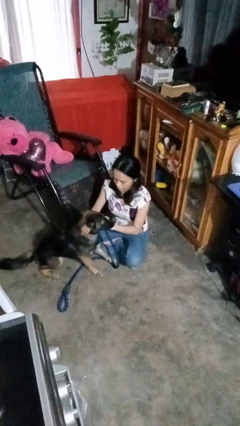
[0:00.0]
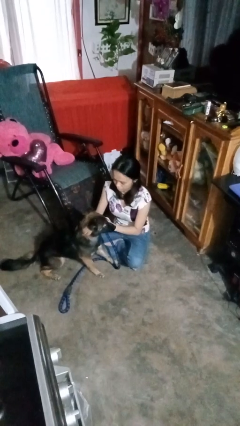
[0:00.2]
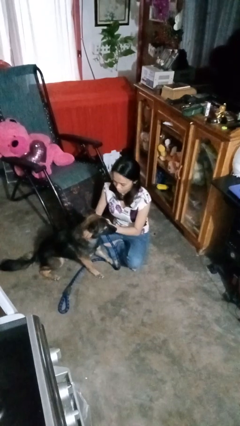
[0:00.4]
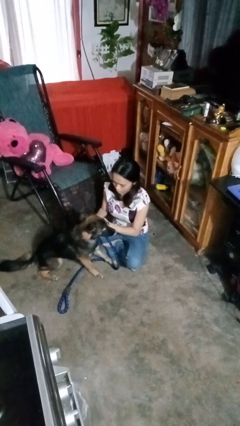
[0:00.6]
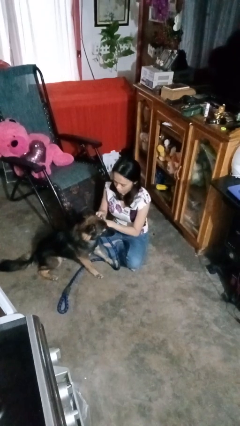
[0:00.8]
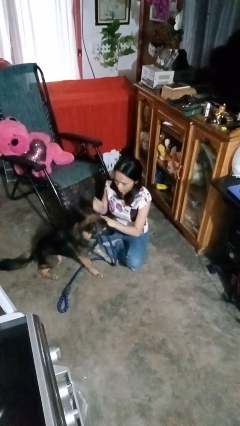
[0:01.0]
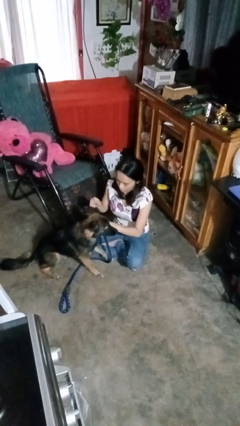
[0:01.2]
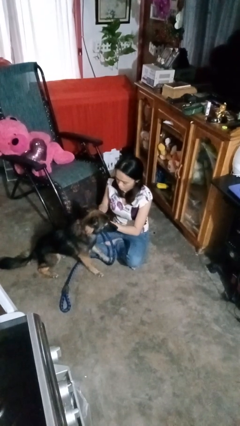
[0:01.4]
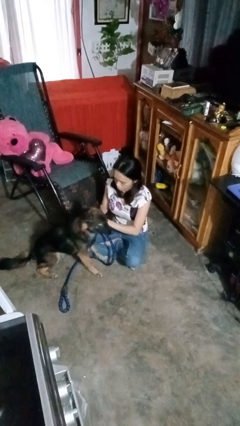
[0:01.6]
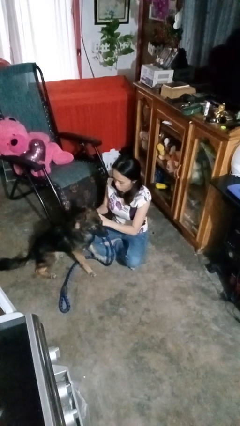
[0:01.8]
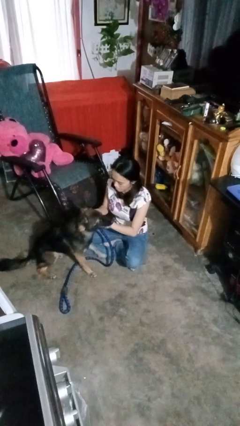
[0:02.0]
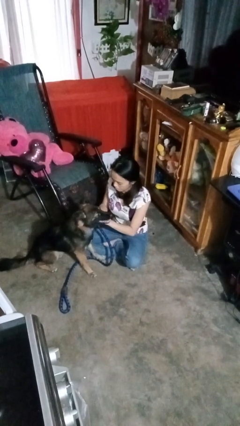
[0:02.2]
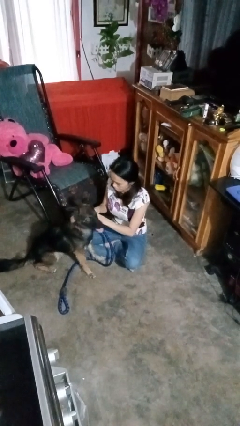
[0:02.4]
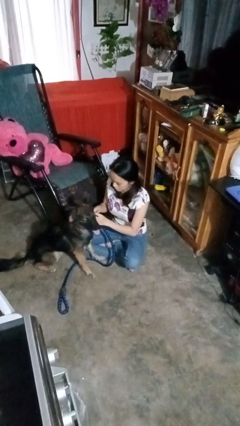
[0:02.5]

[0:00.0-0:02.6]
person attaches leash to dog

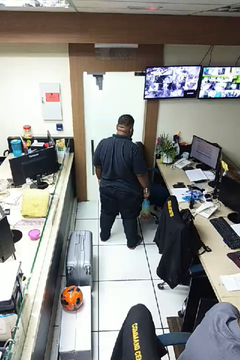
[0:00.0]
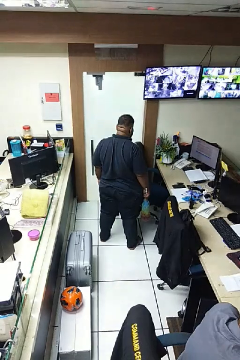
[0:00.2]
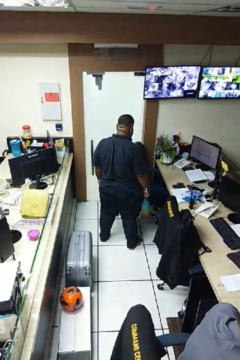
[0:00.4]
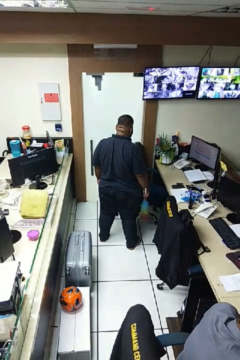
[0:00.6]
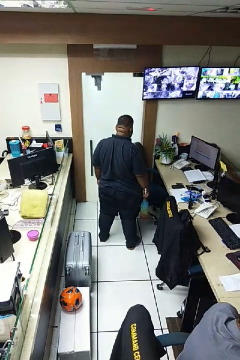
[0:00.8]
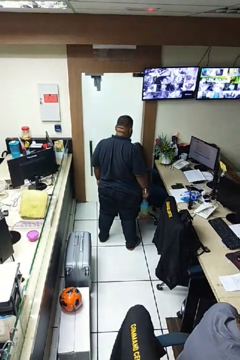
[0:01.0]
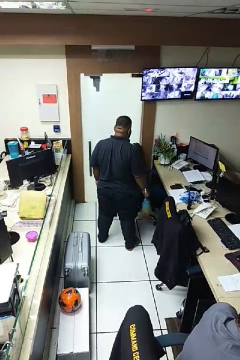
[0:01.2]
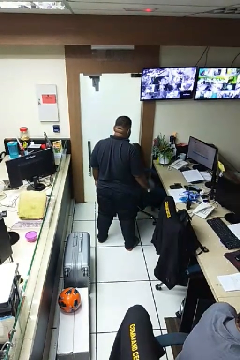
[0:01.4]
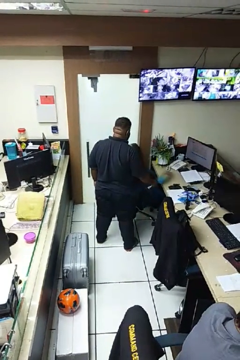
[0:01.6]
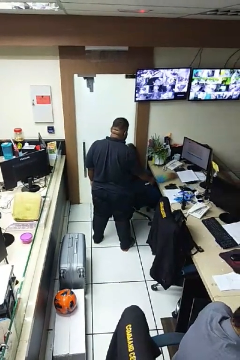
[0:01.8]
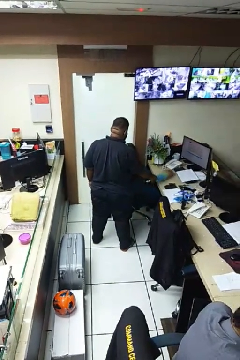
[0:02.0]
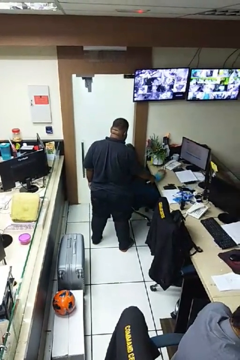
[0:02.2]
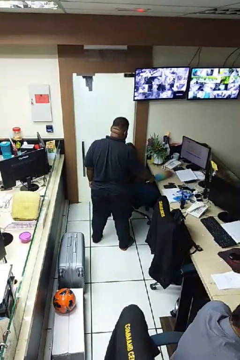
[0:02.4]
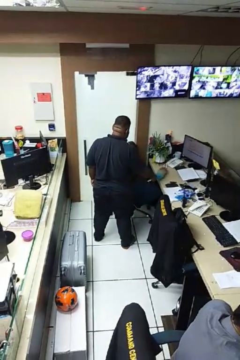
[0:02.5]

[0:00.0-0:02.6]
person dusts furniture

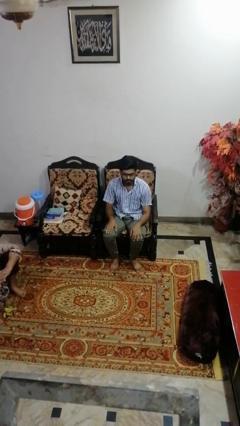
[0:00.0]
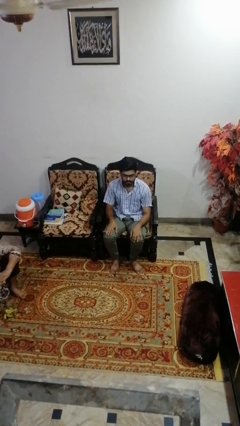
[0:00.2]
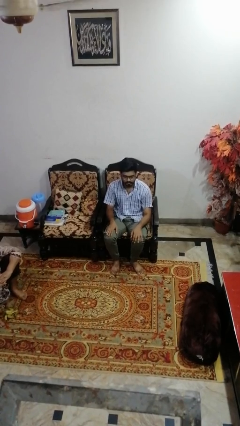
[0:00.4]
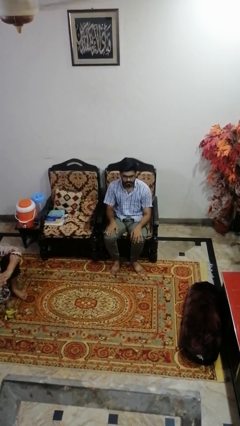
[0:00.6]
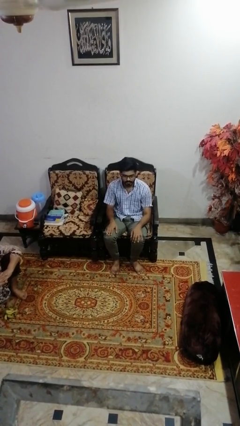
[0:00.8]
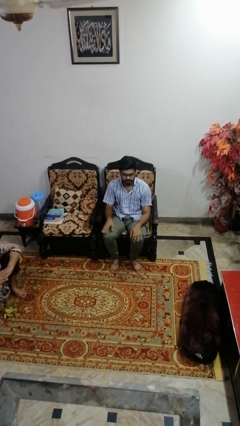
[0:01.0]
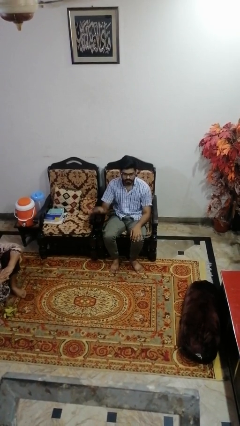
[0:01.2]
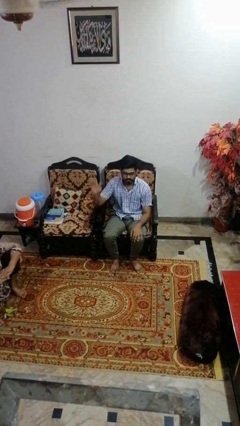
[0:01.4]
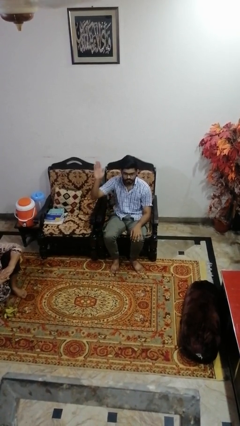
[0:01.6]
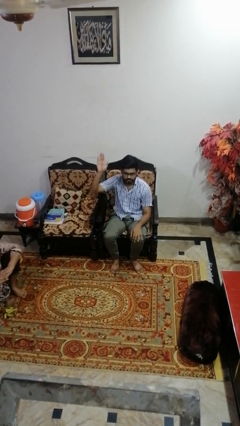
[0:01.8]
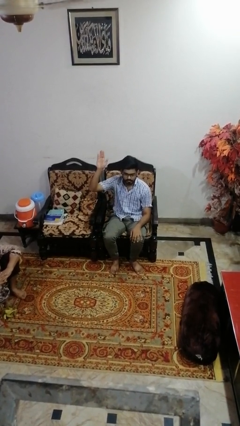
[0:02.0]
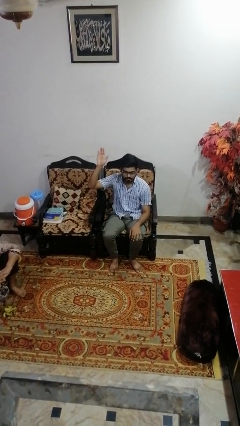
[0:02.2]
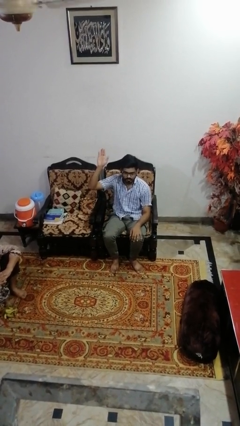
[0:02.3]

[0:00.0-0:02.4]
person gestures raise hand

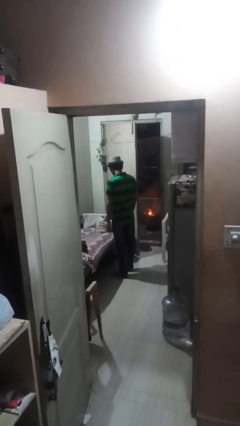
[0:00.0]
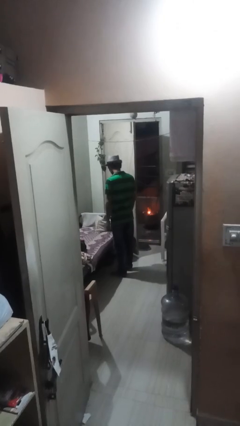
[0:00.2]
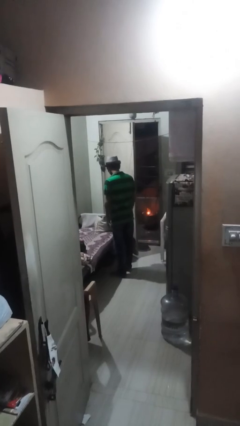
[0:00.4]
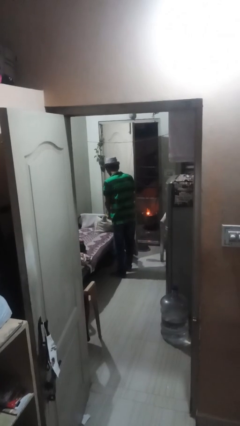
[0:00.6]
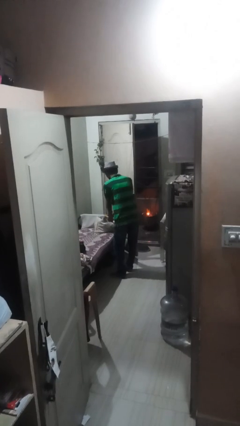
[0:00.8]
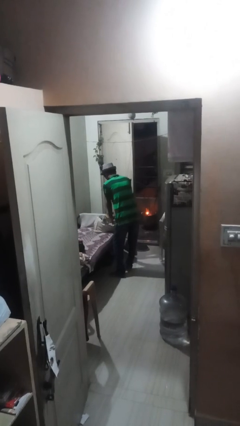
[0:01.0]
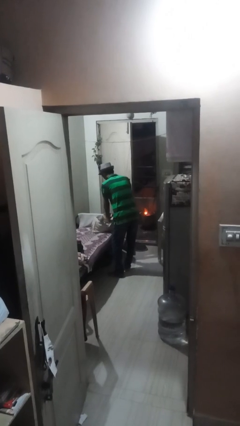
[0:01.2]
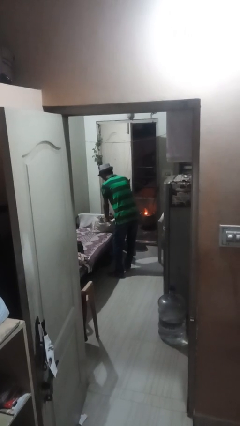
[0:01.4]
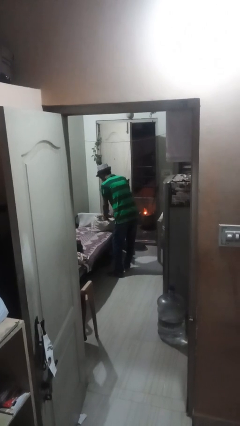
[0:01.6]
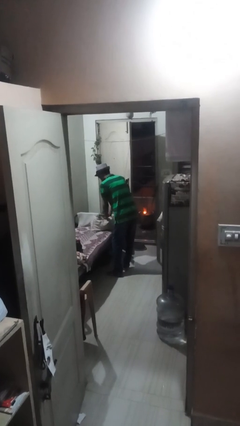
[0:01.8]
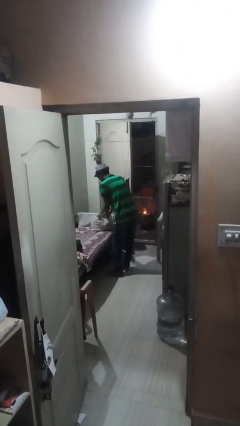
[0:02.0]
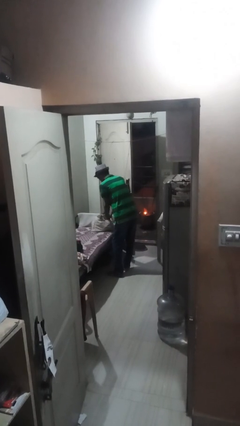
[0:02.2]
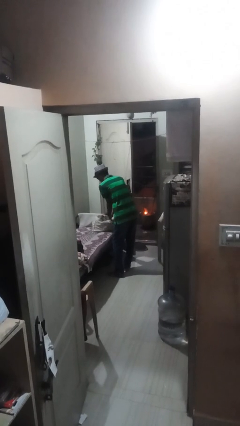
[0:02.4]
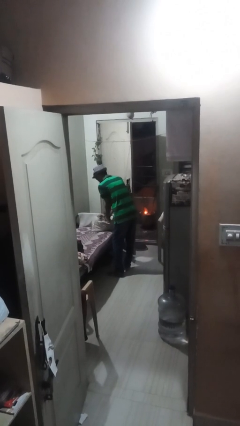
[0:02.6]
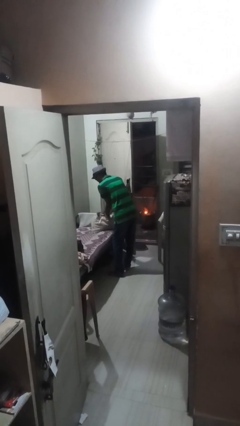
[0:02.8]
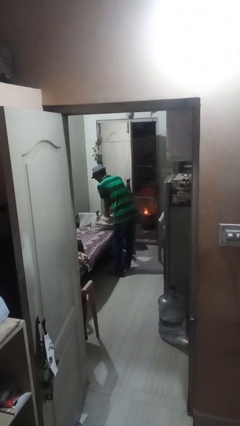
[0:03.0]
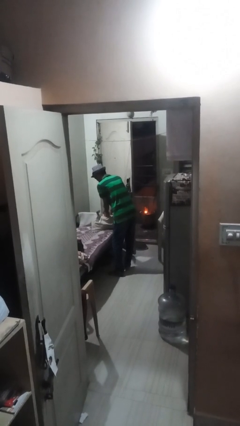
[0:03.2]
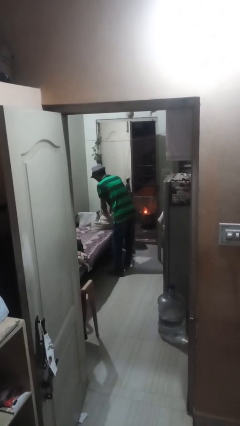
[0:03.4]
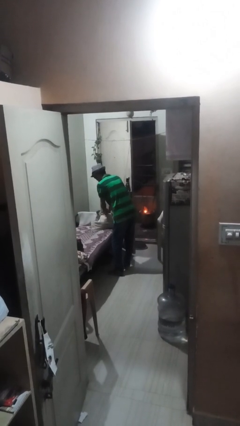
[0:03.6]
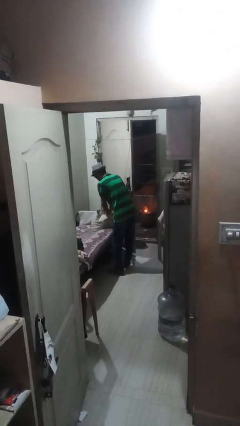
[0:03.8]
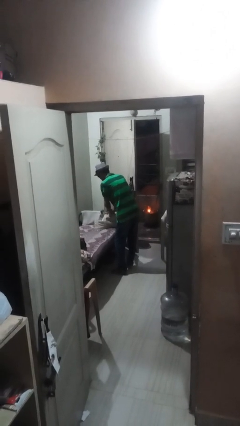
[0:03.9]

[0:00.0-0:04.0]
person searches in bag

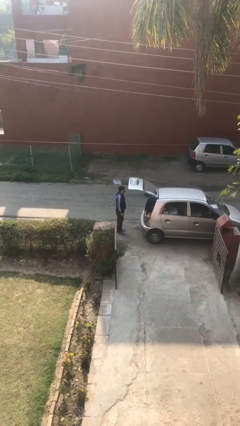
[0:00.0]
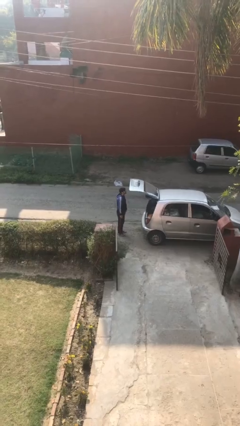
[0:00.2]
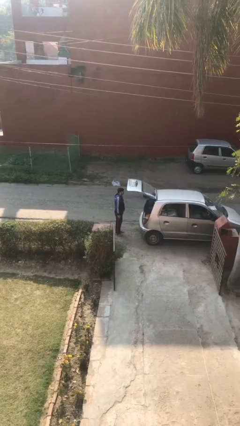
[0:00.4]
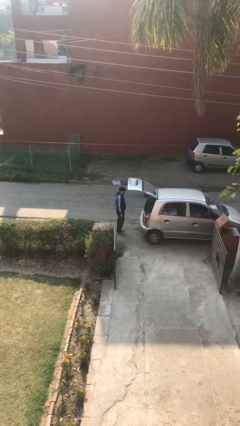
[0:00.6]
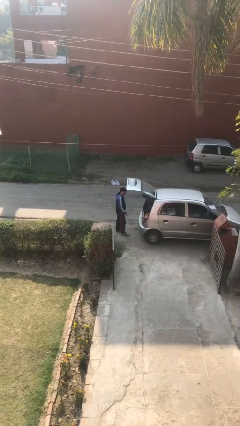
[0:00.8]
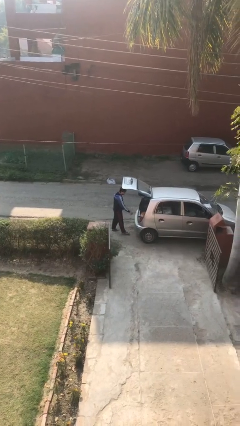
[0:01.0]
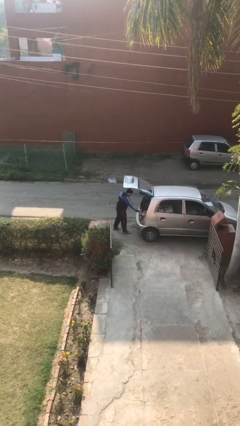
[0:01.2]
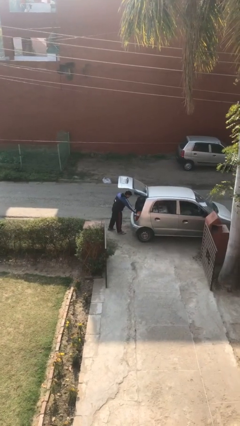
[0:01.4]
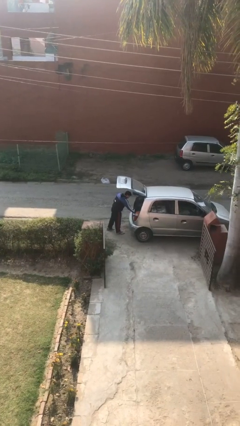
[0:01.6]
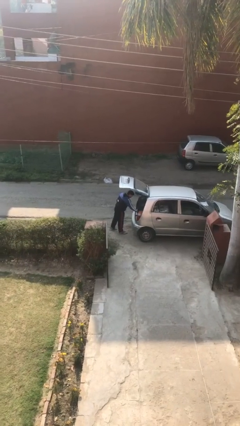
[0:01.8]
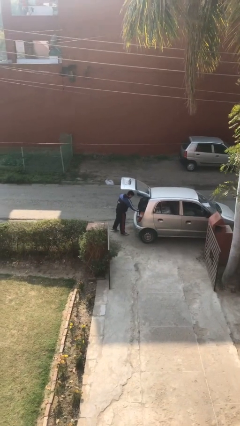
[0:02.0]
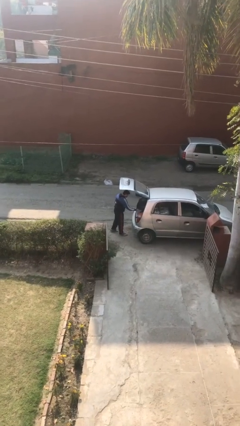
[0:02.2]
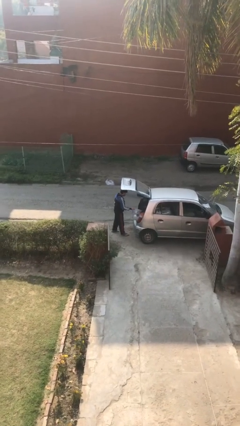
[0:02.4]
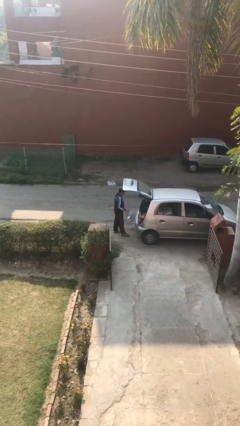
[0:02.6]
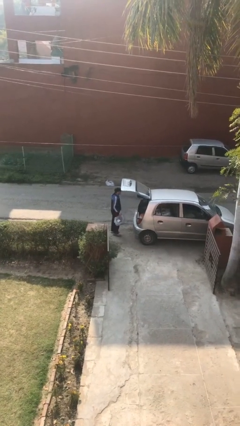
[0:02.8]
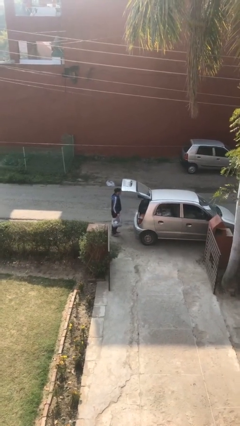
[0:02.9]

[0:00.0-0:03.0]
person unloads car

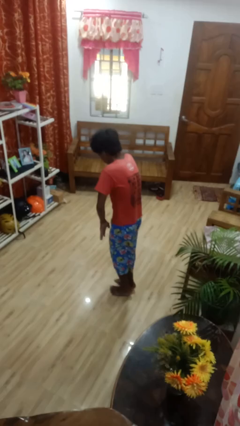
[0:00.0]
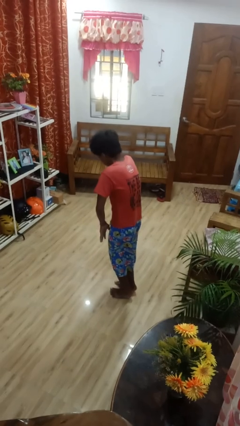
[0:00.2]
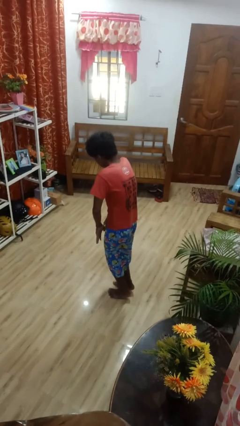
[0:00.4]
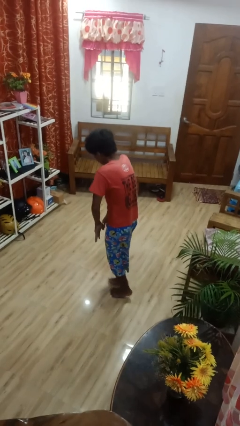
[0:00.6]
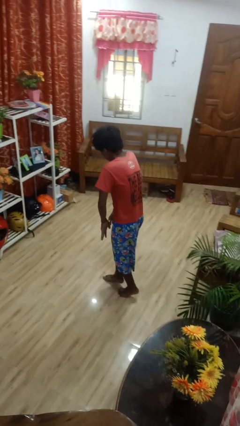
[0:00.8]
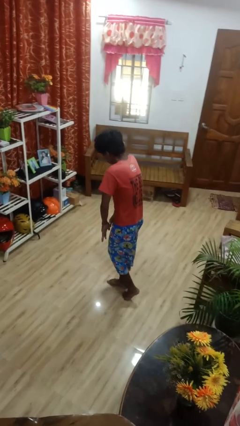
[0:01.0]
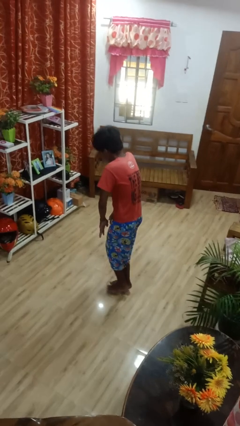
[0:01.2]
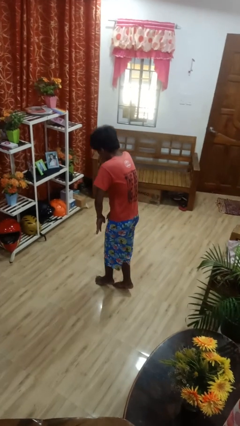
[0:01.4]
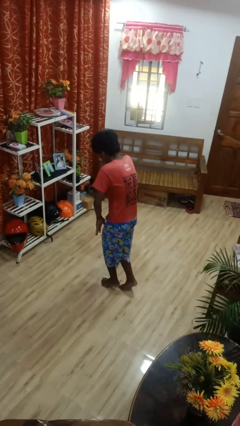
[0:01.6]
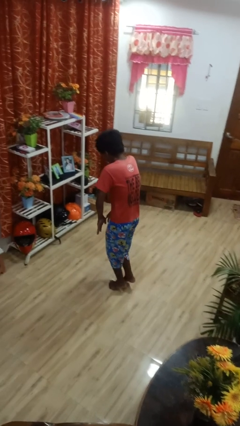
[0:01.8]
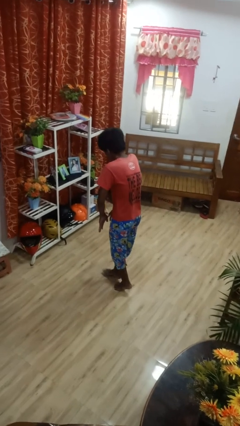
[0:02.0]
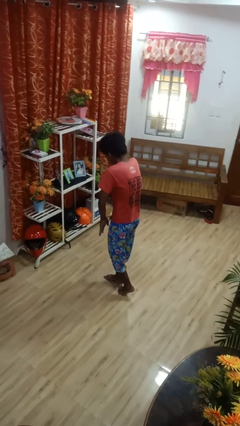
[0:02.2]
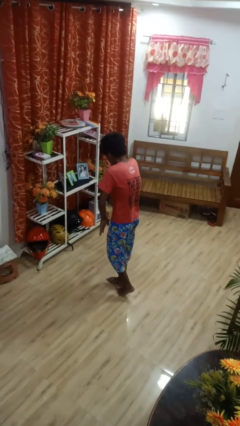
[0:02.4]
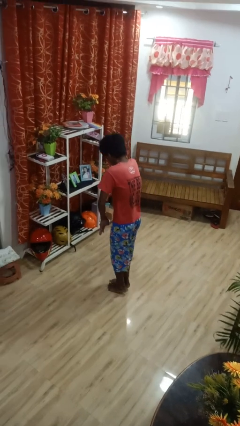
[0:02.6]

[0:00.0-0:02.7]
person walks tiptoe

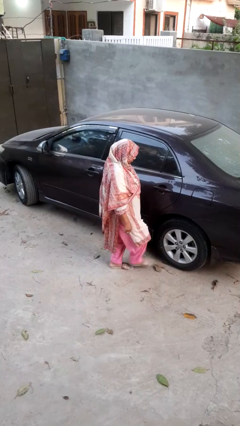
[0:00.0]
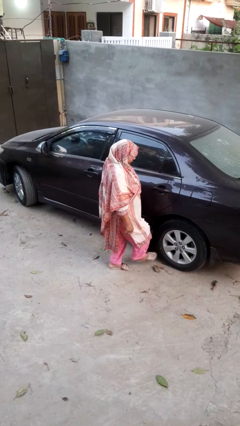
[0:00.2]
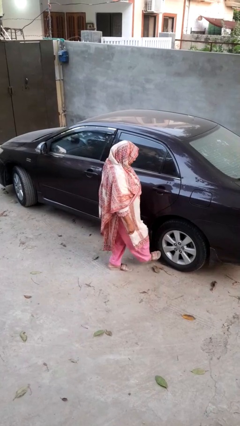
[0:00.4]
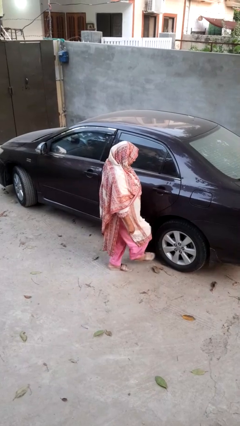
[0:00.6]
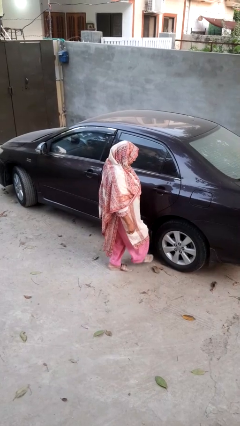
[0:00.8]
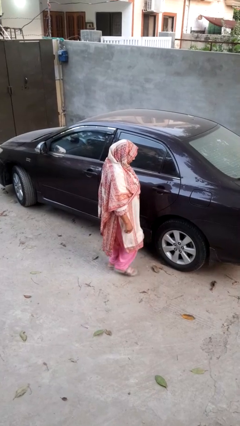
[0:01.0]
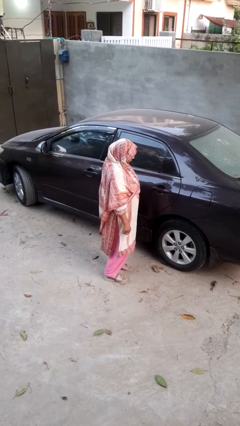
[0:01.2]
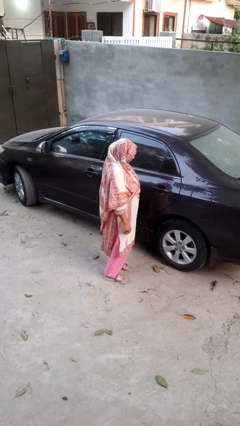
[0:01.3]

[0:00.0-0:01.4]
person kicks car tires
